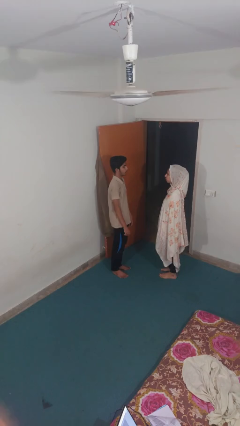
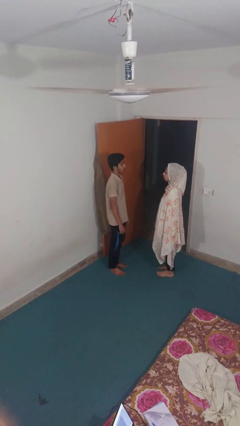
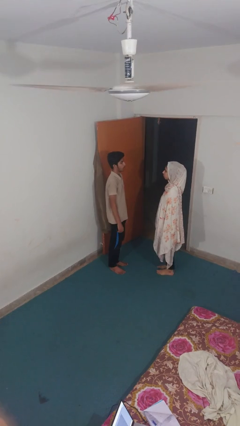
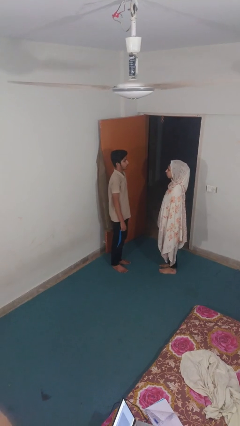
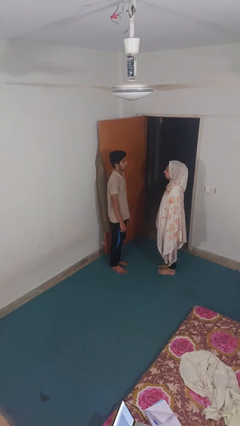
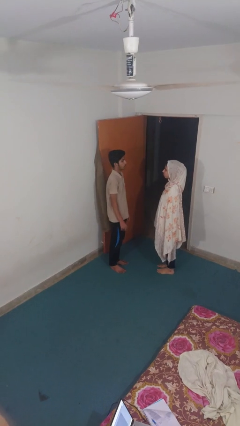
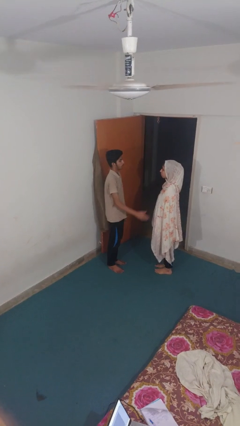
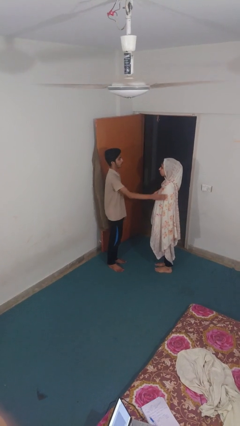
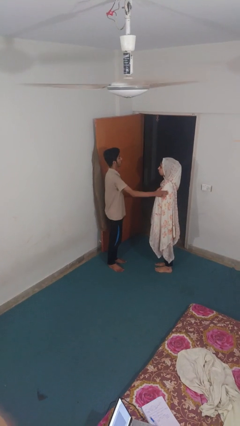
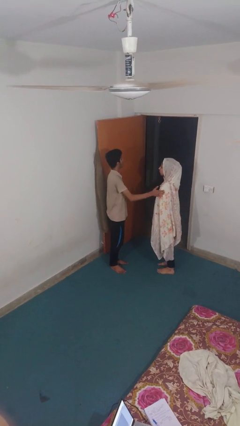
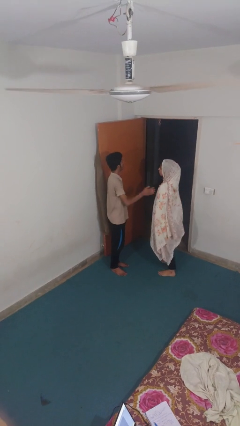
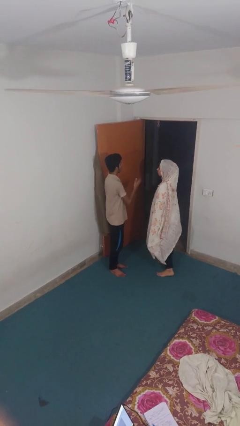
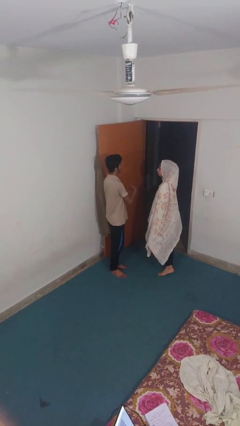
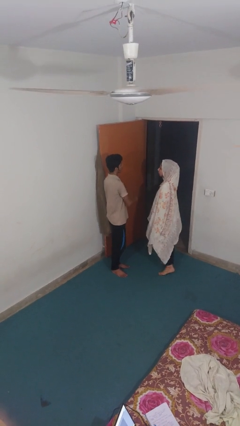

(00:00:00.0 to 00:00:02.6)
person shoves person

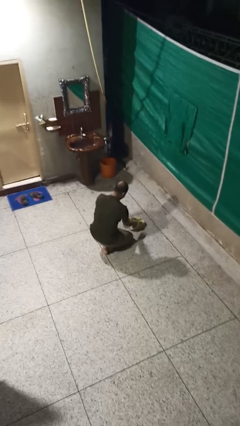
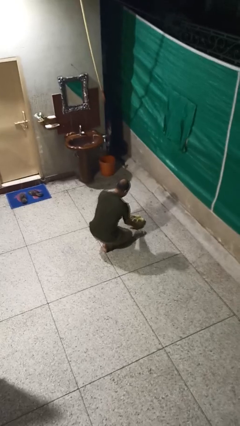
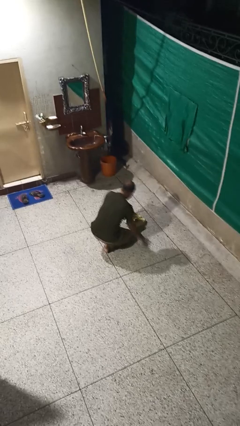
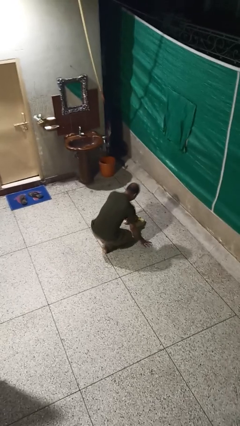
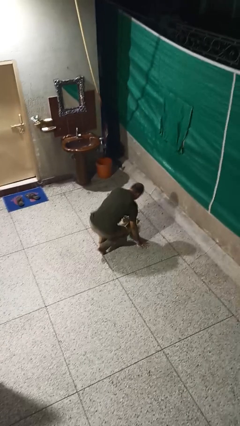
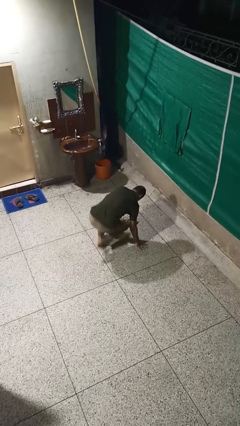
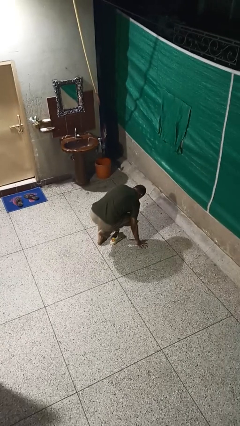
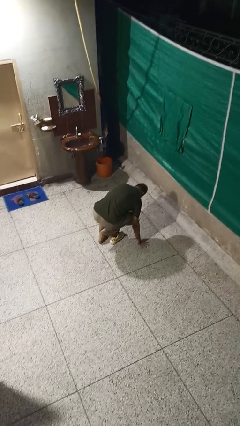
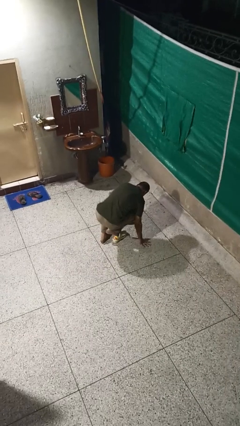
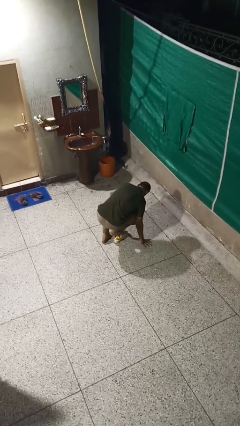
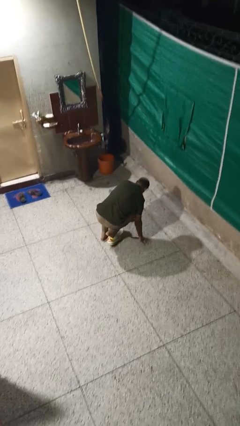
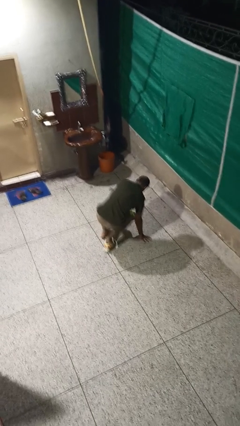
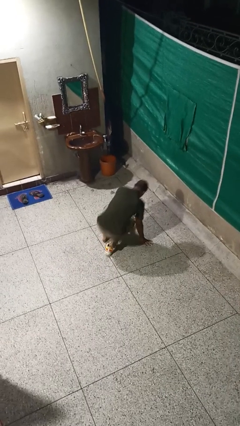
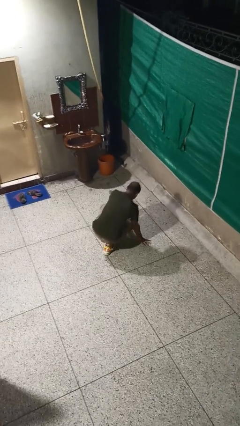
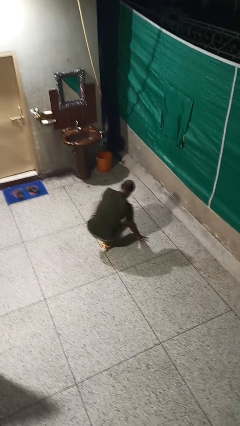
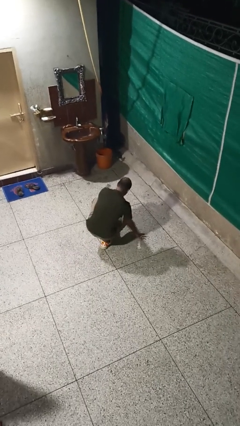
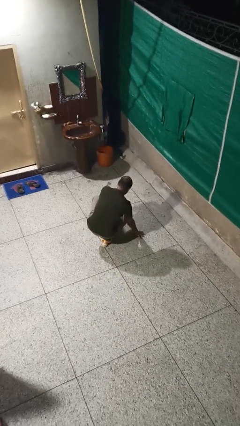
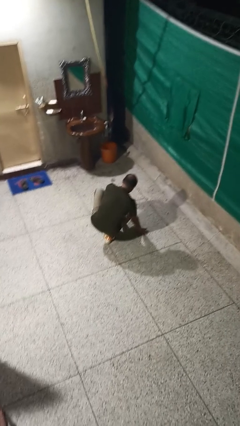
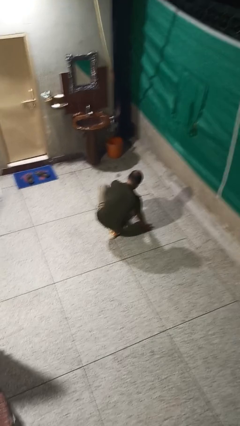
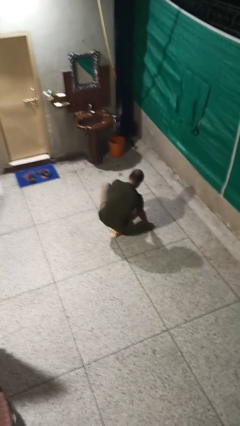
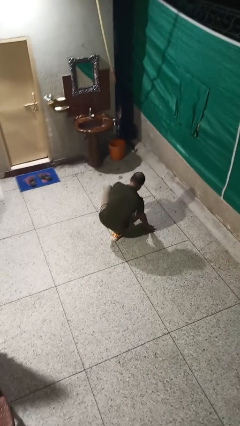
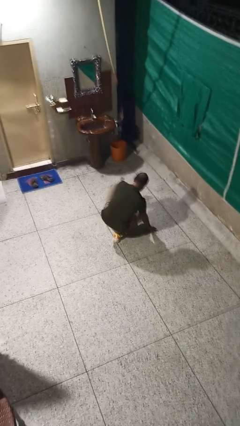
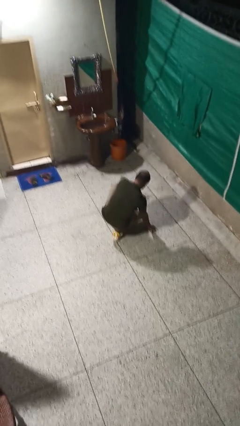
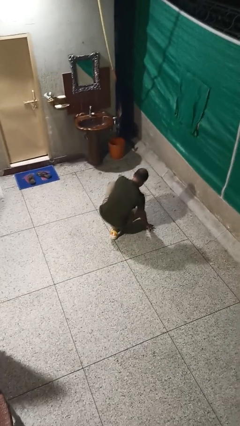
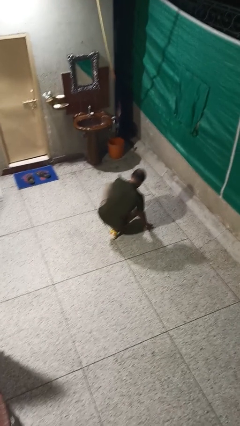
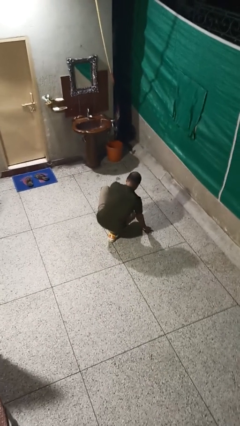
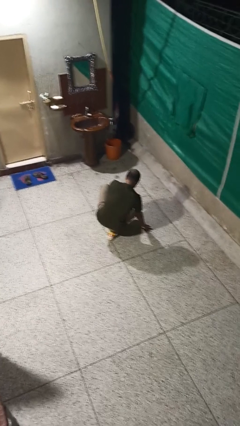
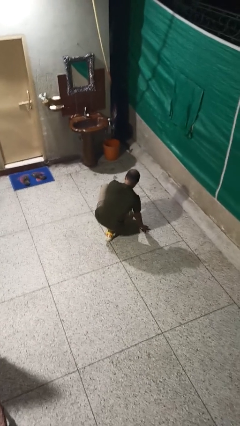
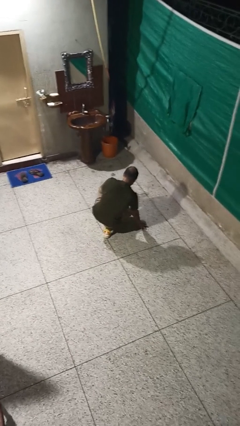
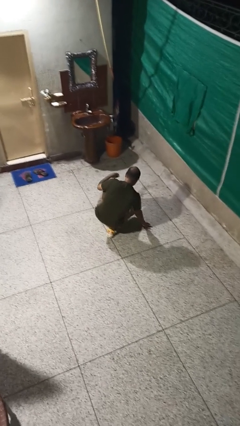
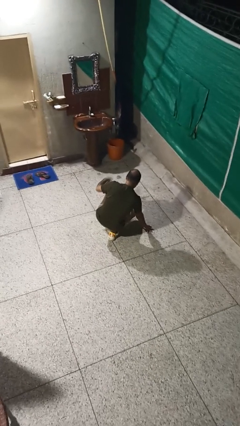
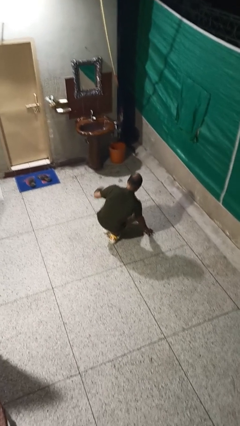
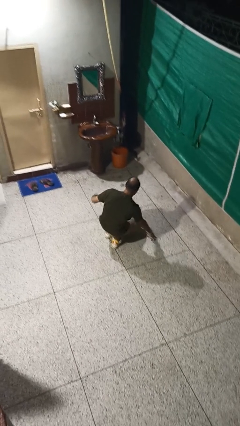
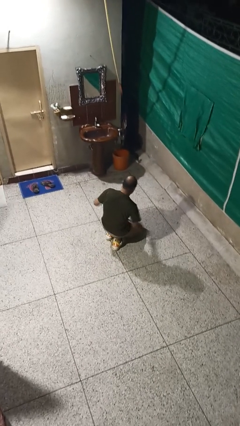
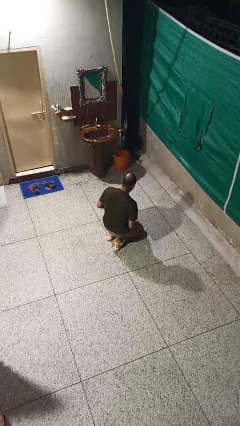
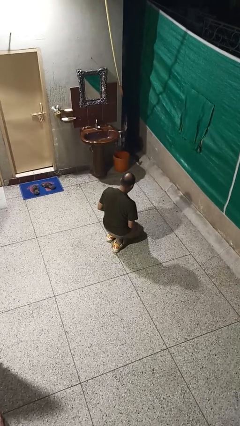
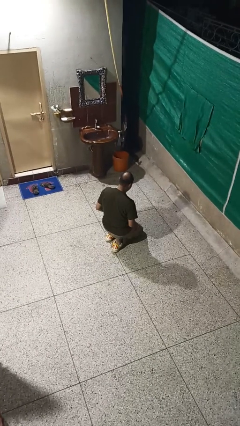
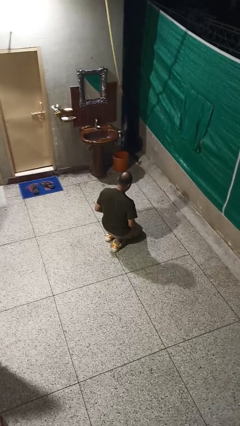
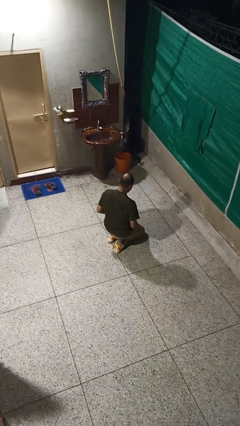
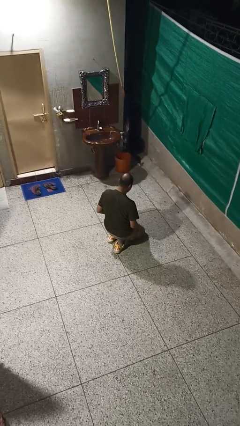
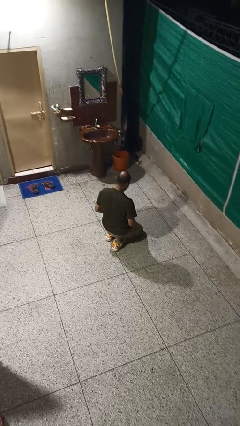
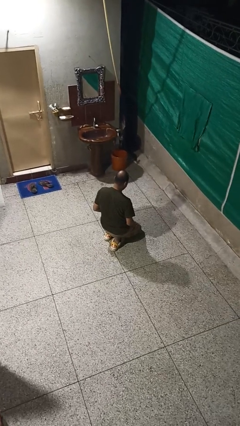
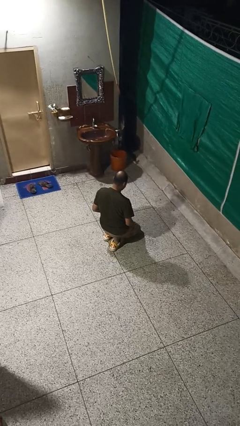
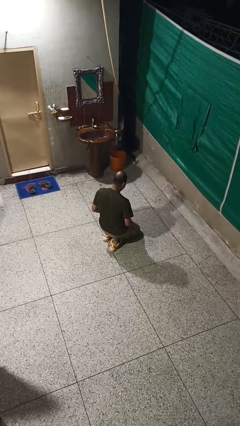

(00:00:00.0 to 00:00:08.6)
person puts on shoes

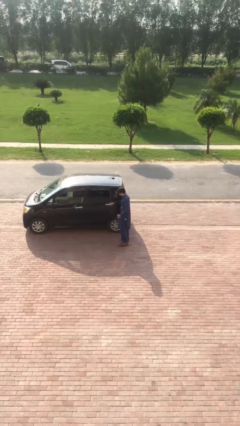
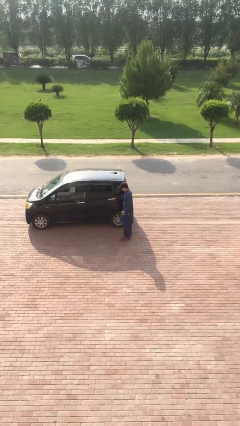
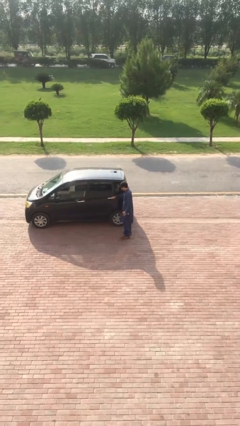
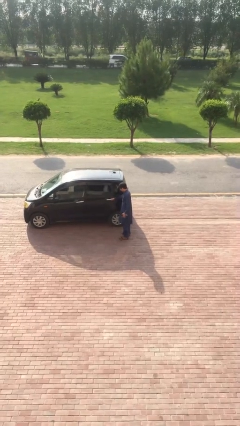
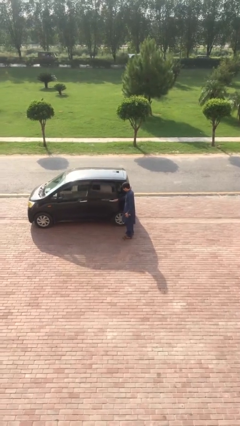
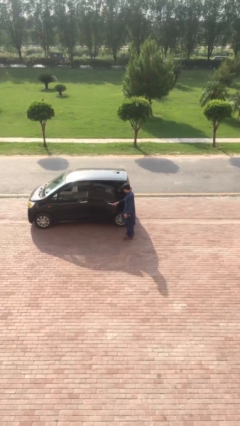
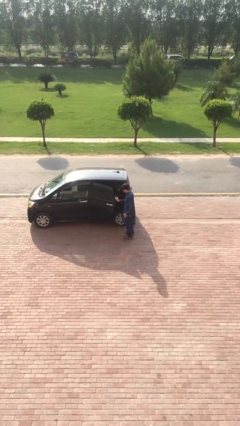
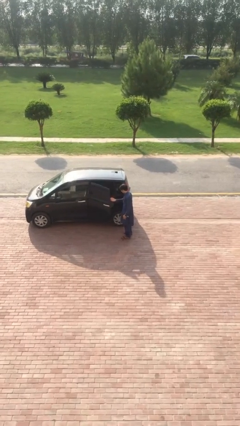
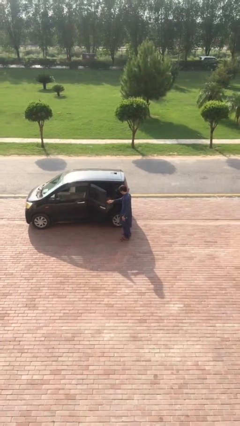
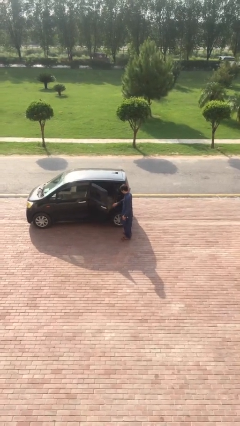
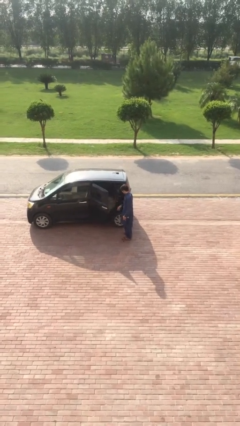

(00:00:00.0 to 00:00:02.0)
person opens car door

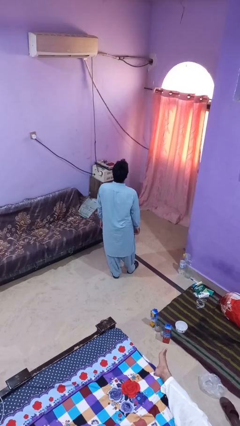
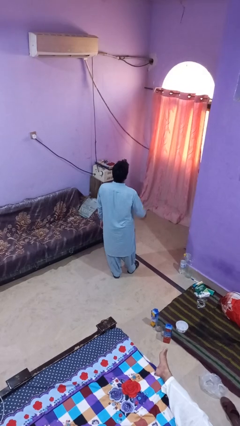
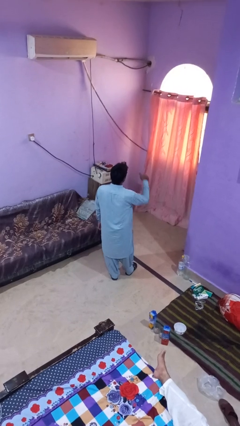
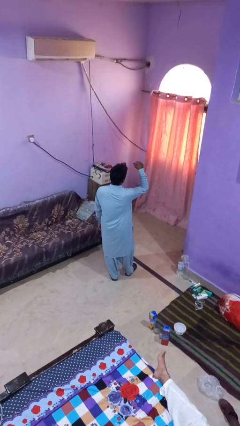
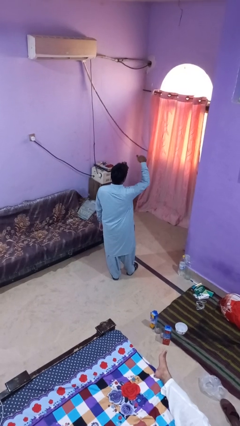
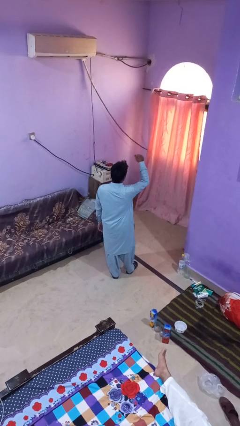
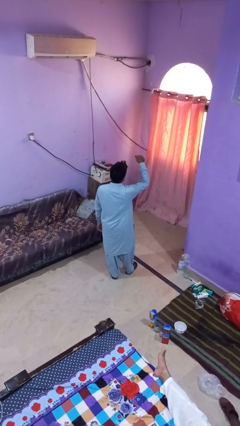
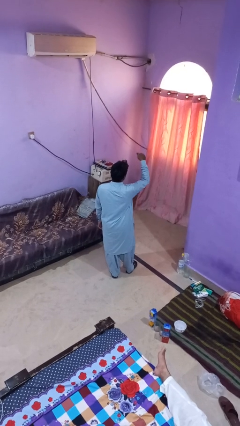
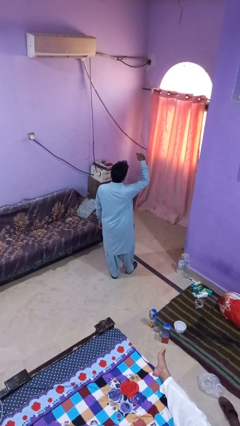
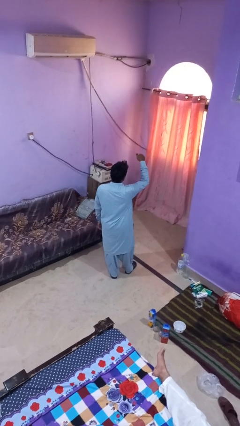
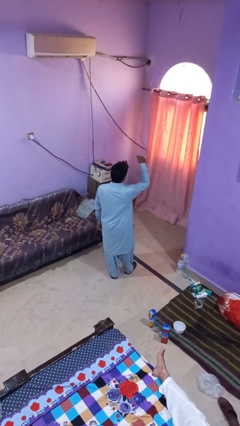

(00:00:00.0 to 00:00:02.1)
person gestures thumbs up

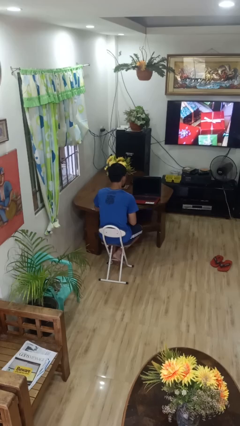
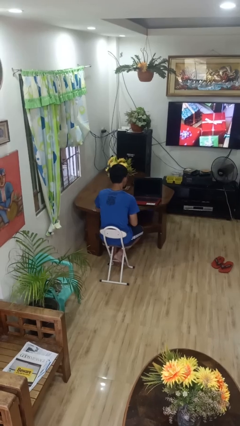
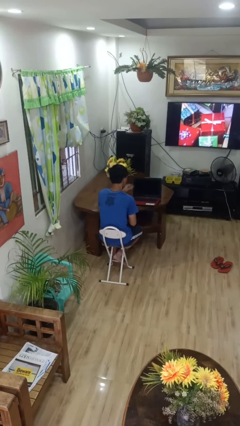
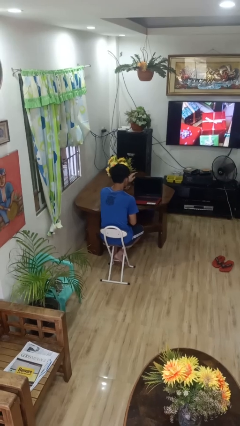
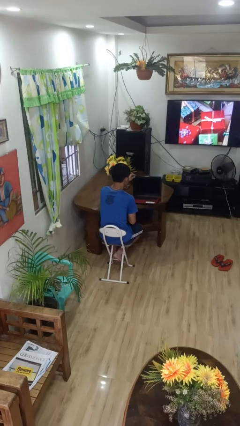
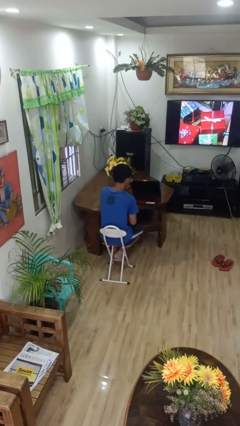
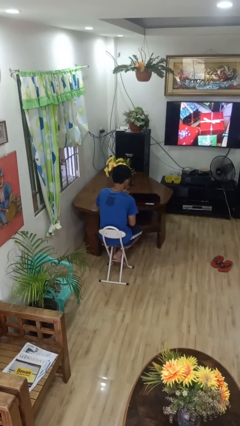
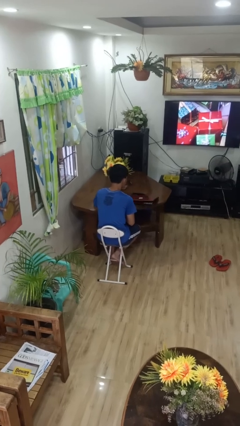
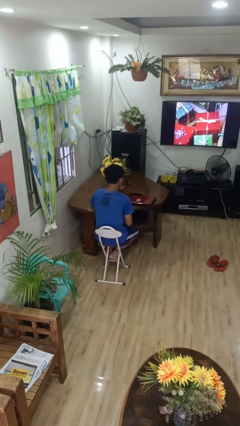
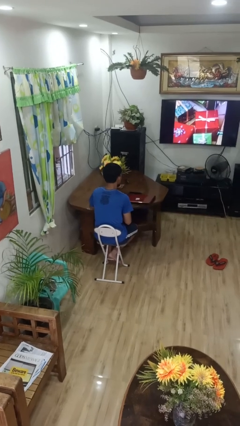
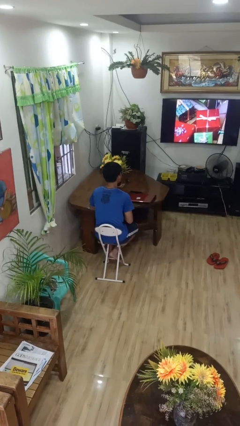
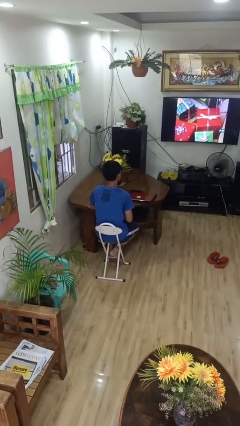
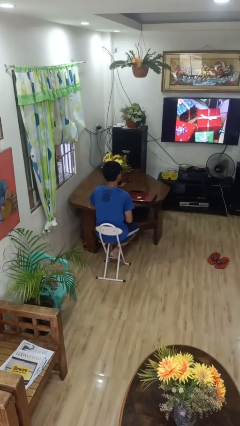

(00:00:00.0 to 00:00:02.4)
person closes laptop
